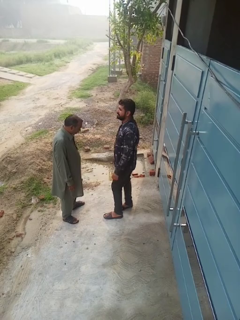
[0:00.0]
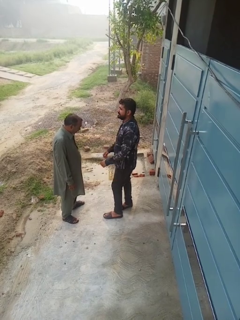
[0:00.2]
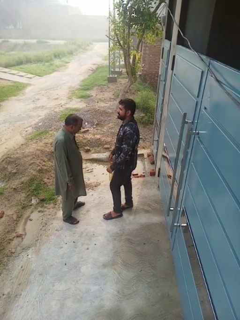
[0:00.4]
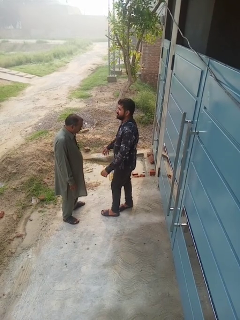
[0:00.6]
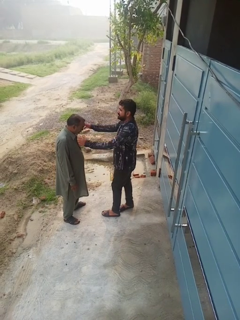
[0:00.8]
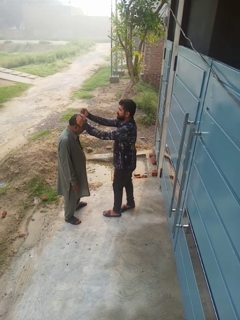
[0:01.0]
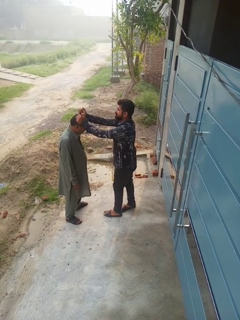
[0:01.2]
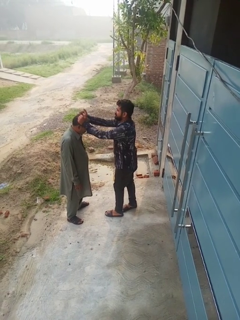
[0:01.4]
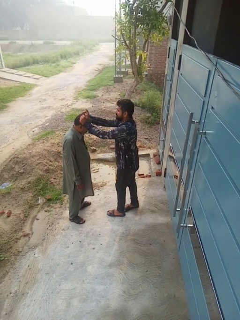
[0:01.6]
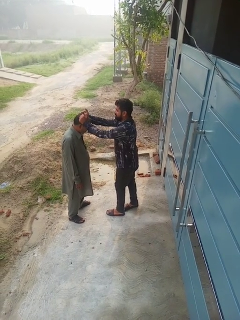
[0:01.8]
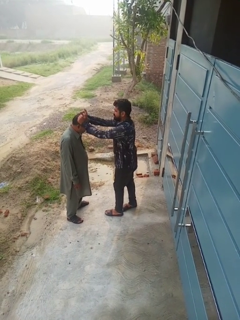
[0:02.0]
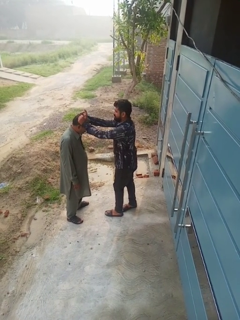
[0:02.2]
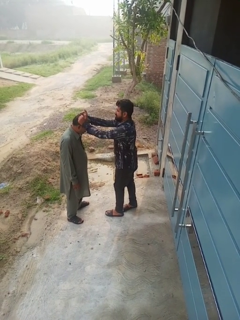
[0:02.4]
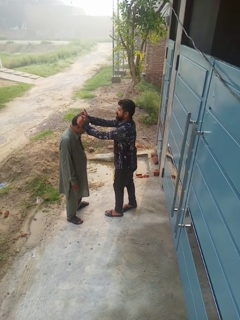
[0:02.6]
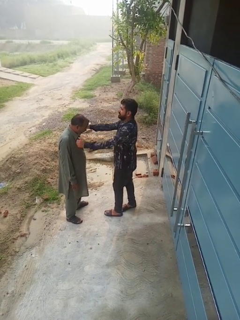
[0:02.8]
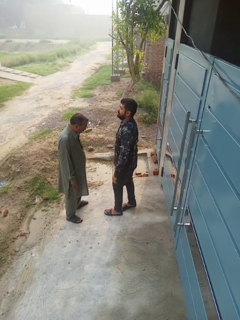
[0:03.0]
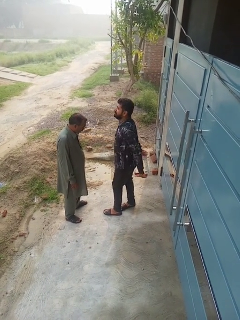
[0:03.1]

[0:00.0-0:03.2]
person grabs person by hair

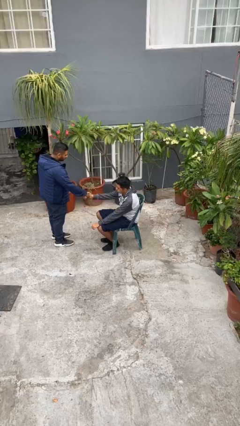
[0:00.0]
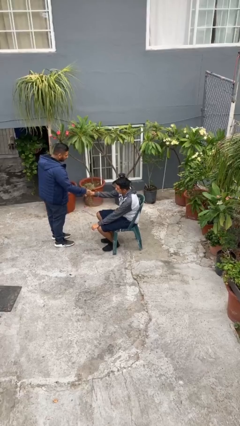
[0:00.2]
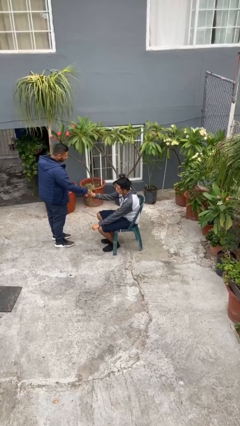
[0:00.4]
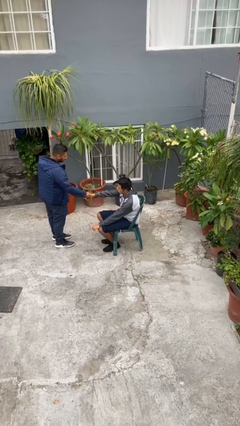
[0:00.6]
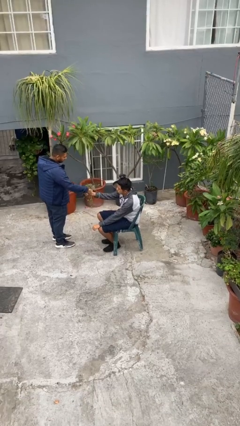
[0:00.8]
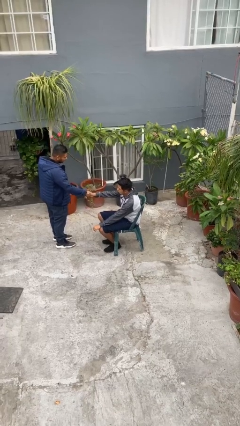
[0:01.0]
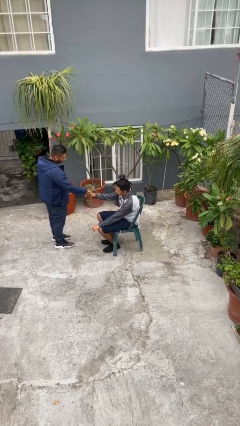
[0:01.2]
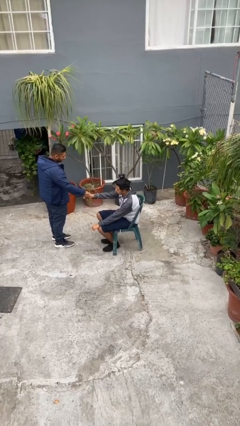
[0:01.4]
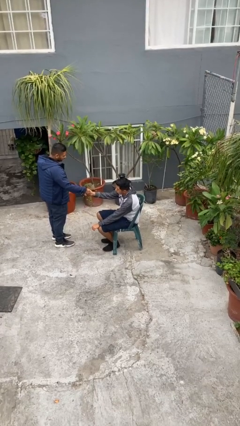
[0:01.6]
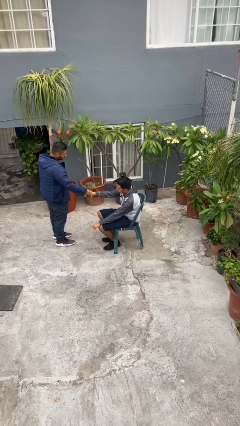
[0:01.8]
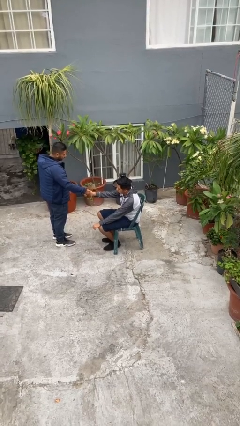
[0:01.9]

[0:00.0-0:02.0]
person shakes hand

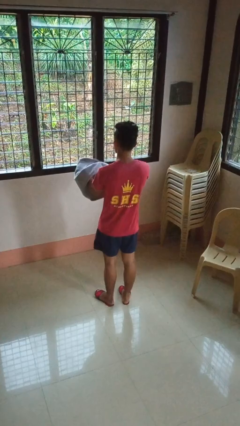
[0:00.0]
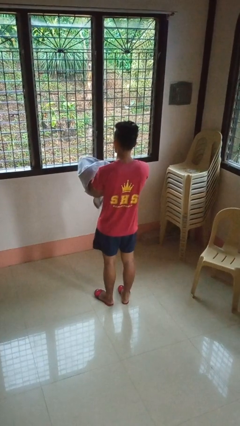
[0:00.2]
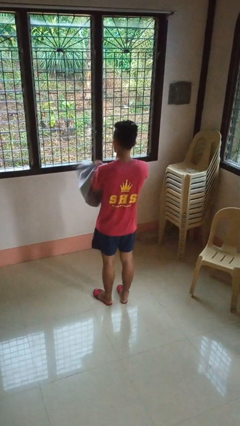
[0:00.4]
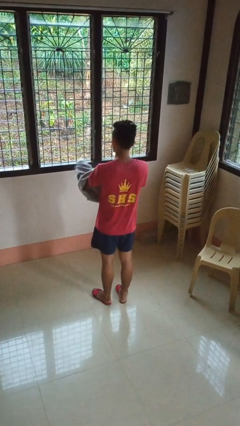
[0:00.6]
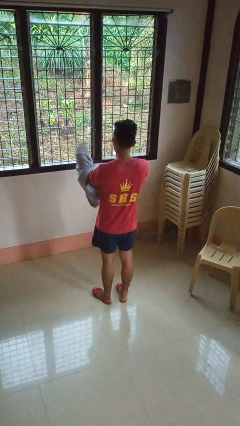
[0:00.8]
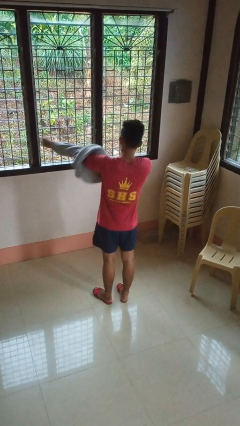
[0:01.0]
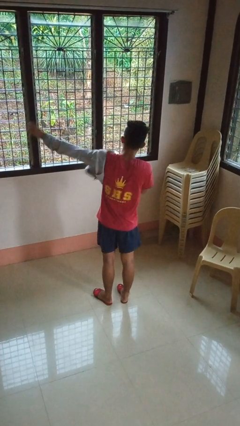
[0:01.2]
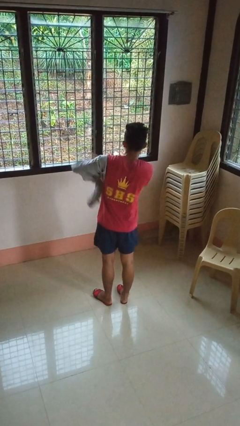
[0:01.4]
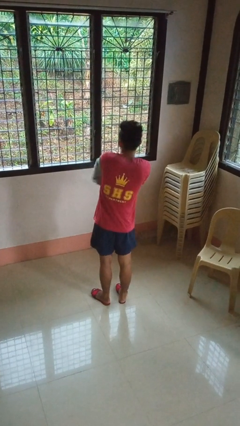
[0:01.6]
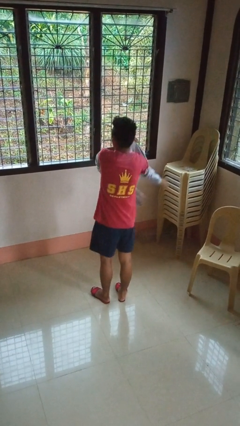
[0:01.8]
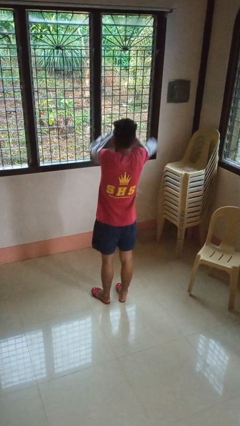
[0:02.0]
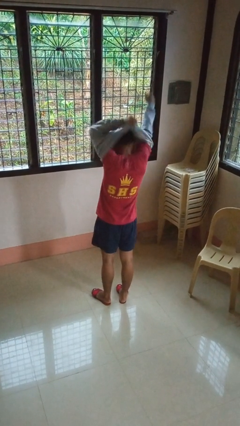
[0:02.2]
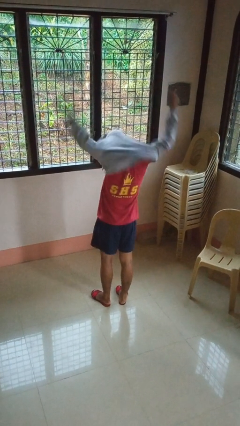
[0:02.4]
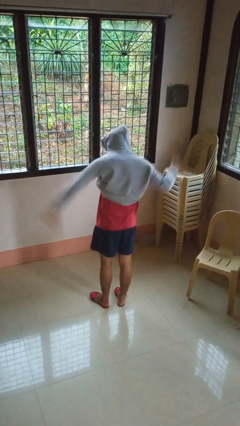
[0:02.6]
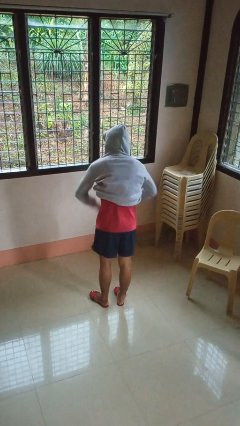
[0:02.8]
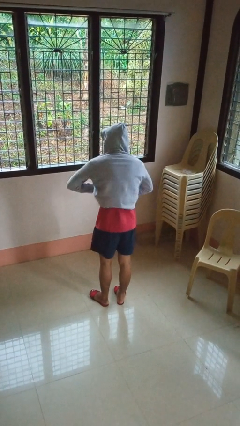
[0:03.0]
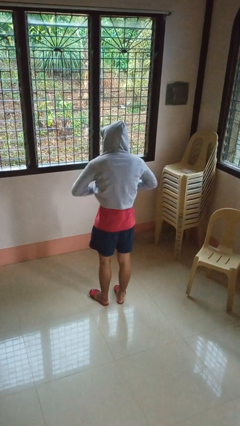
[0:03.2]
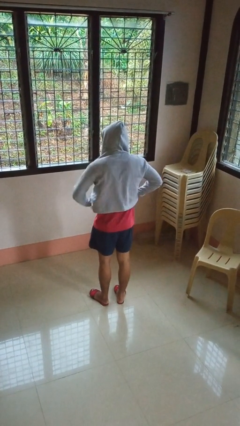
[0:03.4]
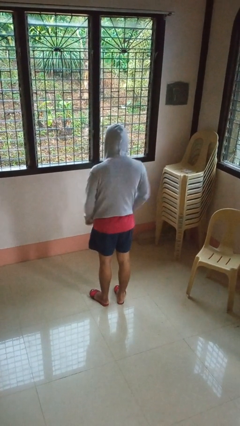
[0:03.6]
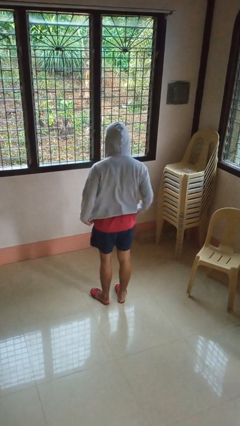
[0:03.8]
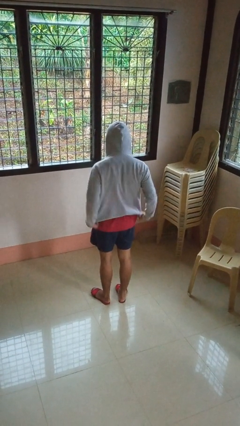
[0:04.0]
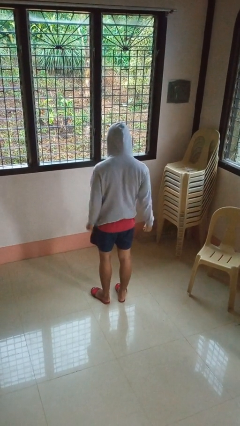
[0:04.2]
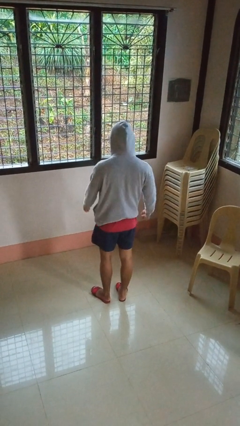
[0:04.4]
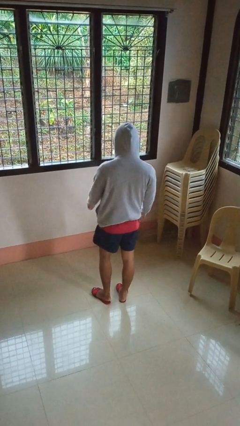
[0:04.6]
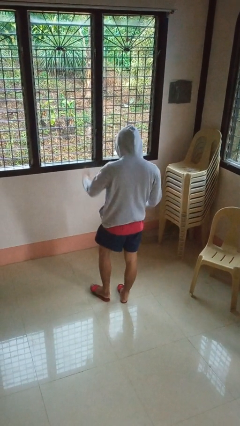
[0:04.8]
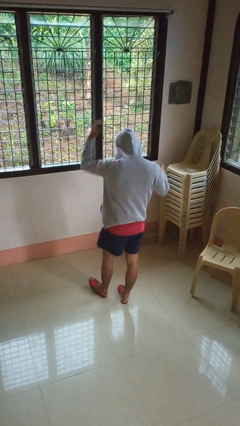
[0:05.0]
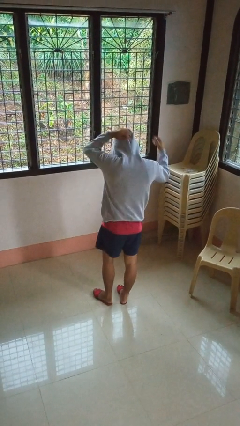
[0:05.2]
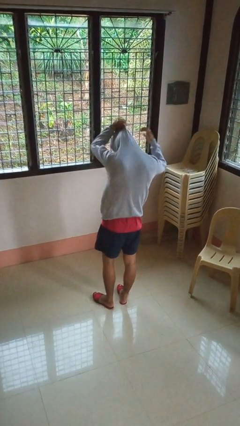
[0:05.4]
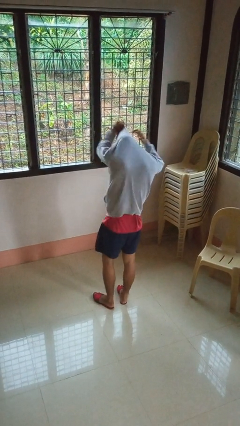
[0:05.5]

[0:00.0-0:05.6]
person puts on hoodie

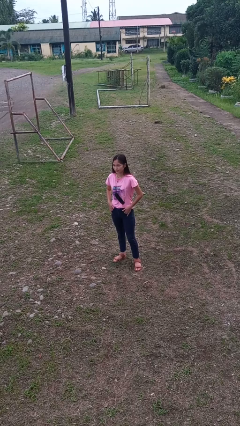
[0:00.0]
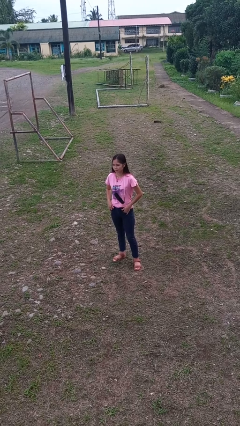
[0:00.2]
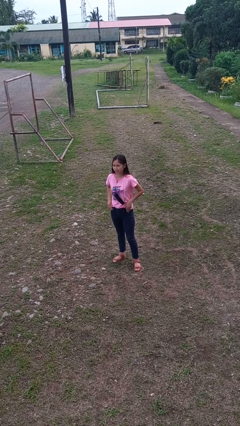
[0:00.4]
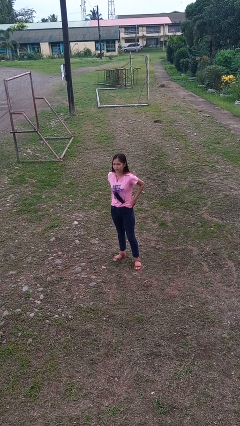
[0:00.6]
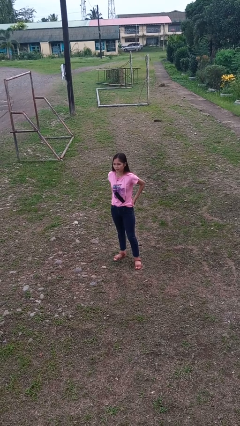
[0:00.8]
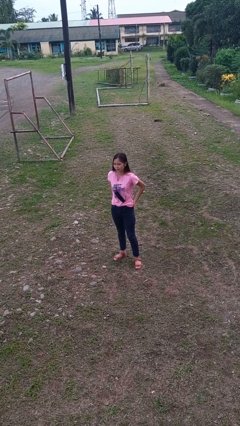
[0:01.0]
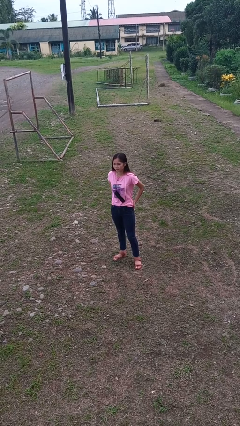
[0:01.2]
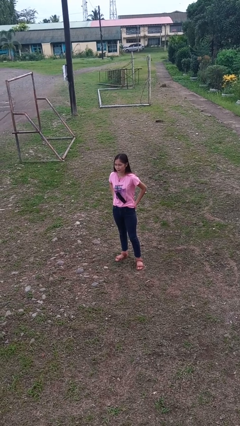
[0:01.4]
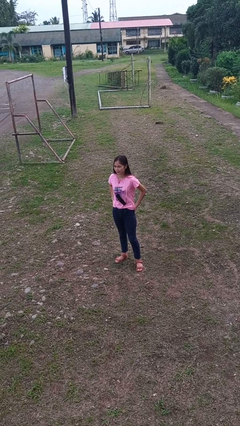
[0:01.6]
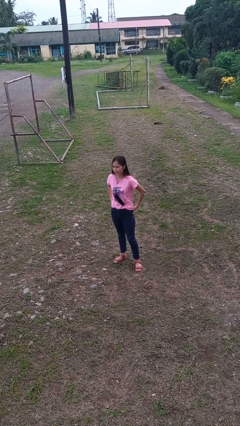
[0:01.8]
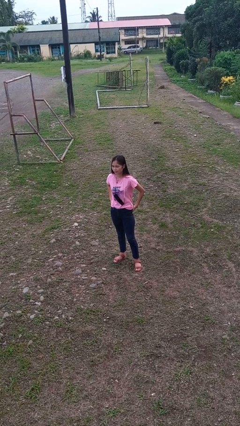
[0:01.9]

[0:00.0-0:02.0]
person puts hands in back pockets

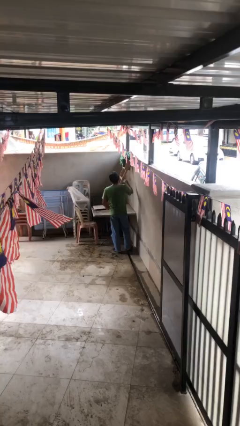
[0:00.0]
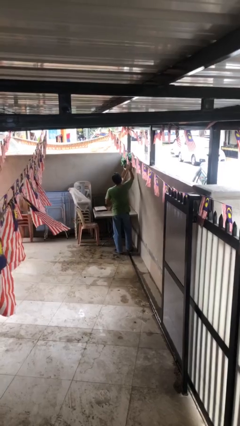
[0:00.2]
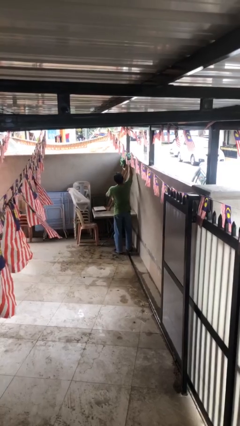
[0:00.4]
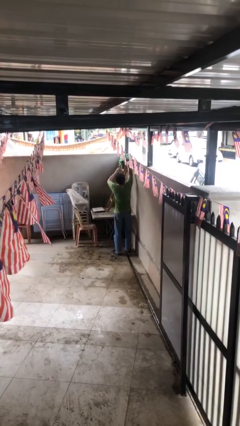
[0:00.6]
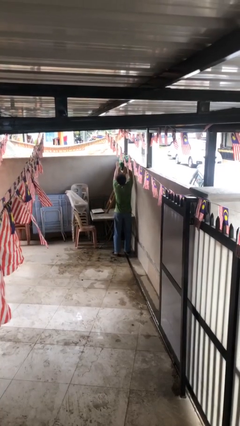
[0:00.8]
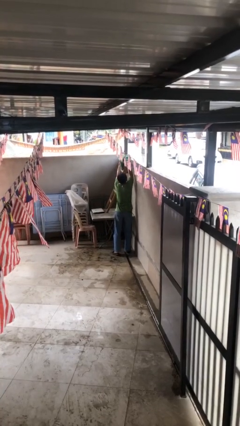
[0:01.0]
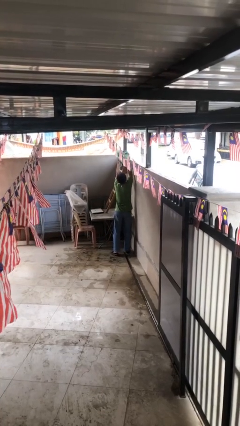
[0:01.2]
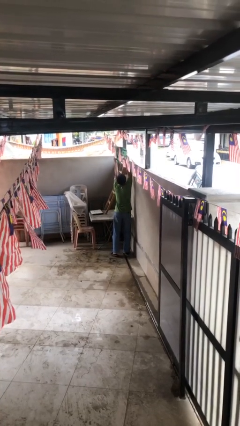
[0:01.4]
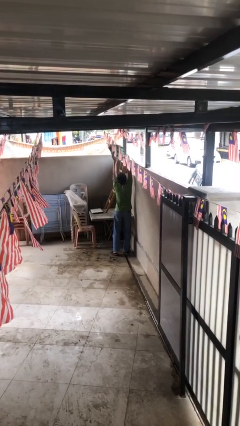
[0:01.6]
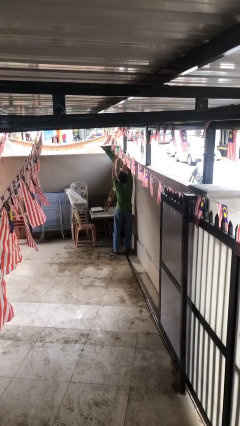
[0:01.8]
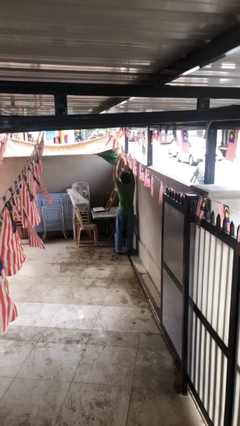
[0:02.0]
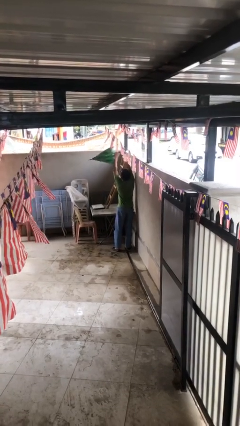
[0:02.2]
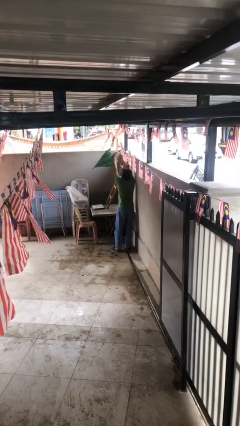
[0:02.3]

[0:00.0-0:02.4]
person picks up object from shelf

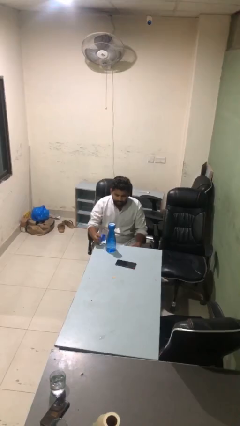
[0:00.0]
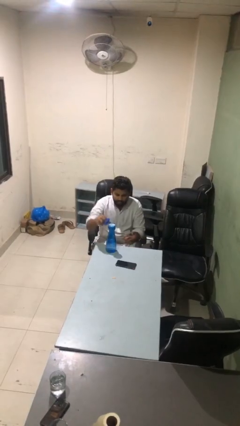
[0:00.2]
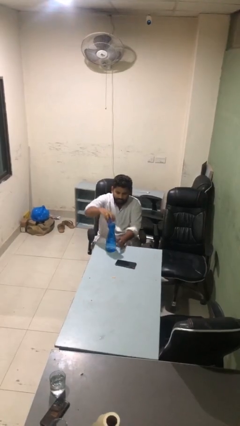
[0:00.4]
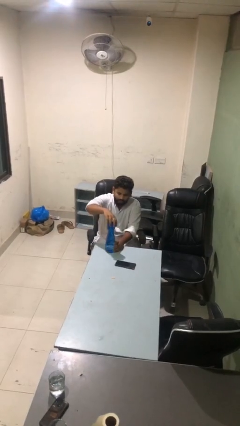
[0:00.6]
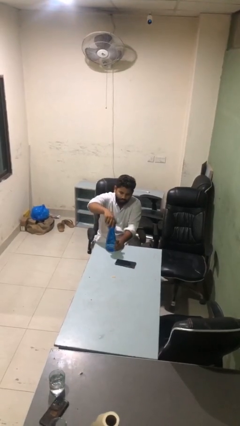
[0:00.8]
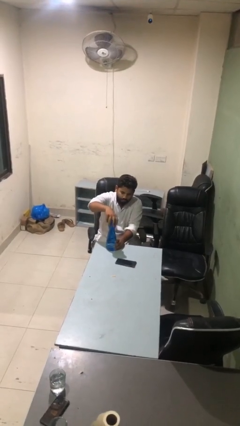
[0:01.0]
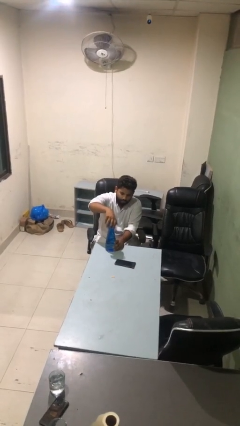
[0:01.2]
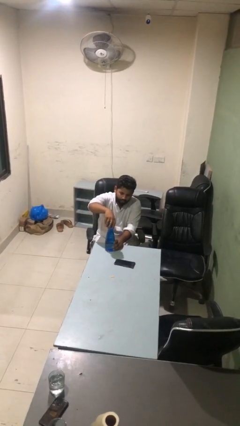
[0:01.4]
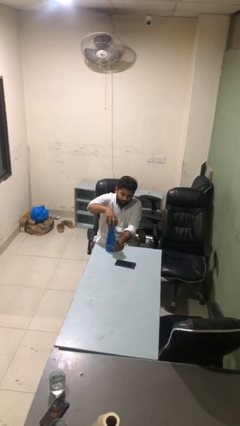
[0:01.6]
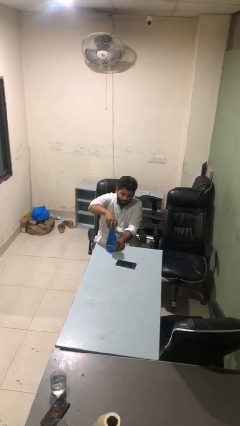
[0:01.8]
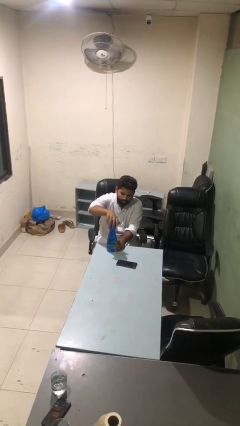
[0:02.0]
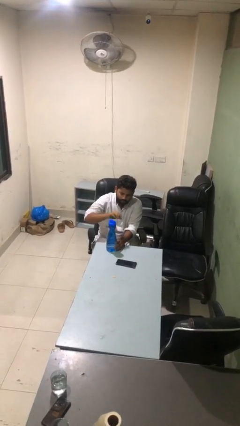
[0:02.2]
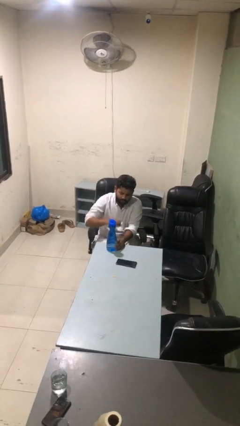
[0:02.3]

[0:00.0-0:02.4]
person screws lid to bottle

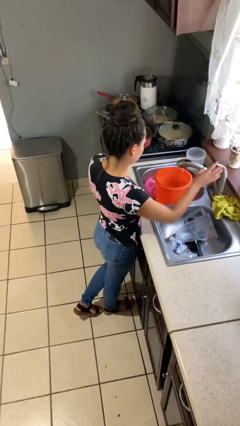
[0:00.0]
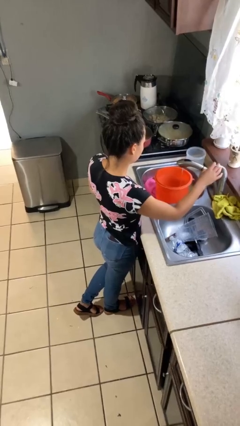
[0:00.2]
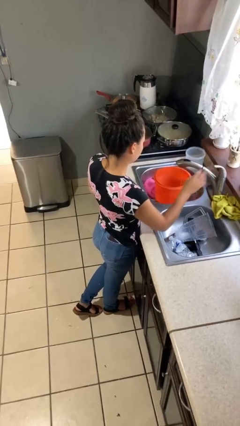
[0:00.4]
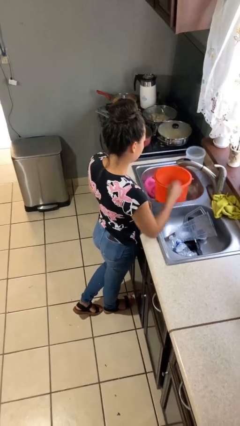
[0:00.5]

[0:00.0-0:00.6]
person turns off faucet
